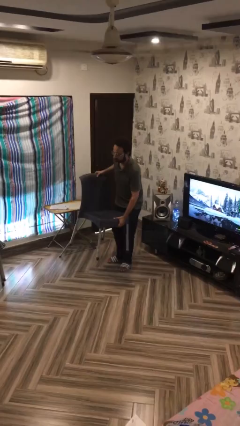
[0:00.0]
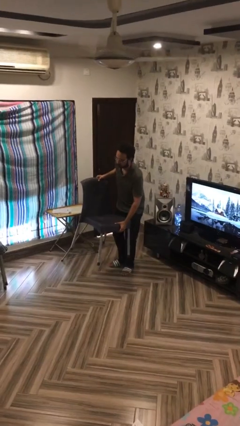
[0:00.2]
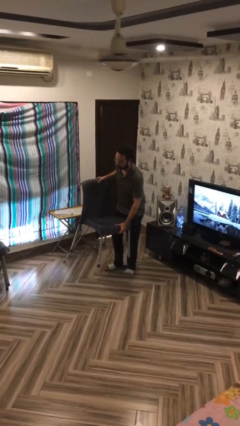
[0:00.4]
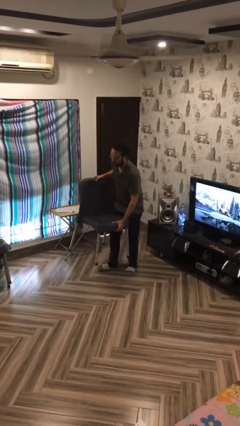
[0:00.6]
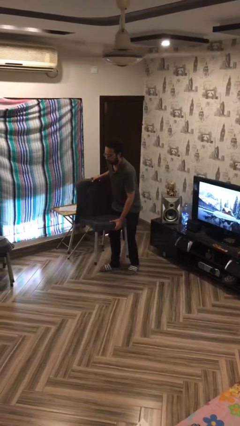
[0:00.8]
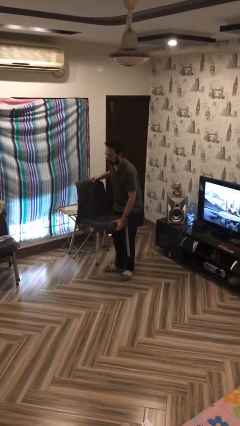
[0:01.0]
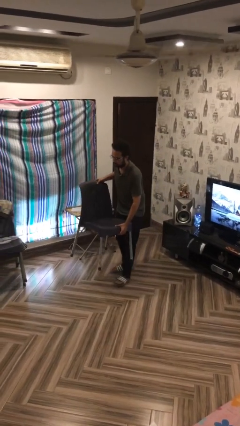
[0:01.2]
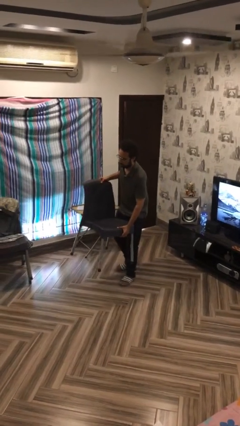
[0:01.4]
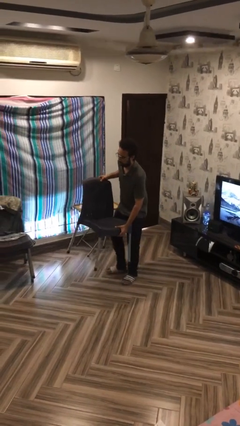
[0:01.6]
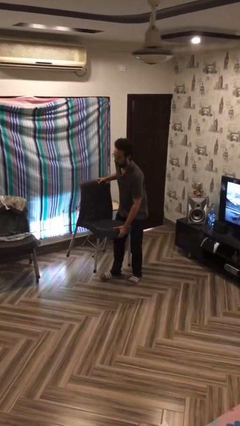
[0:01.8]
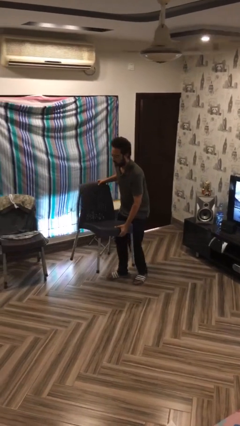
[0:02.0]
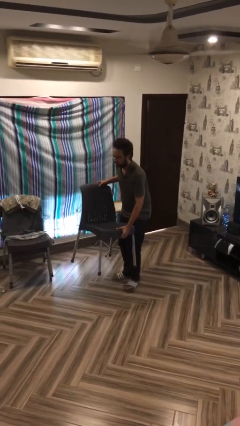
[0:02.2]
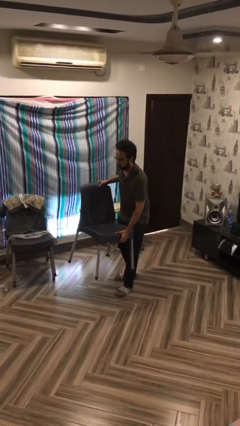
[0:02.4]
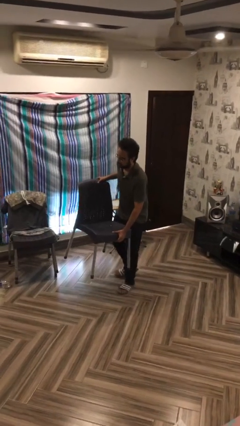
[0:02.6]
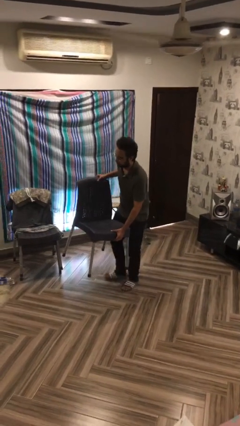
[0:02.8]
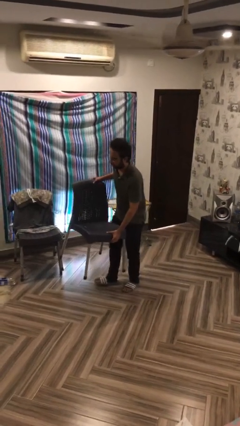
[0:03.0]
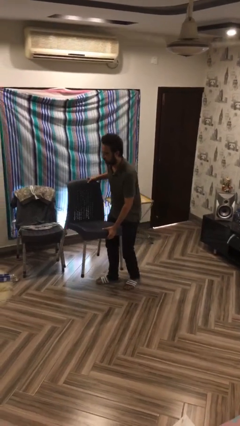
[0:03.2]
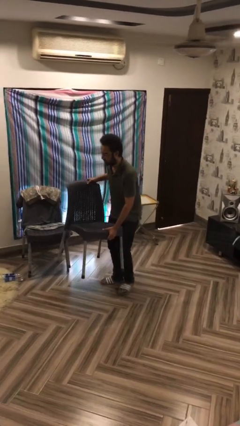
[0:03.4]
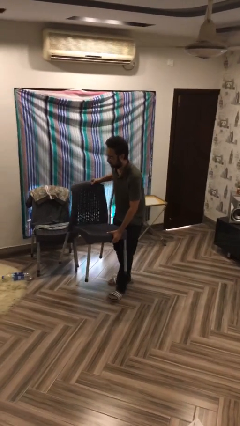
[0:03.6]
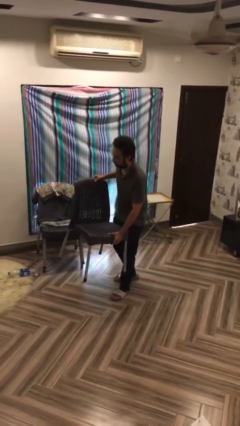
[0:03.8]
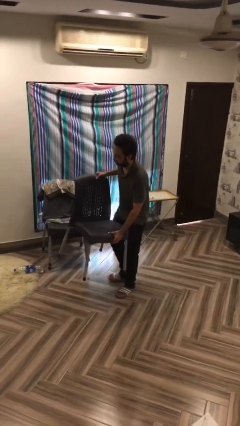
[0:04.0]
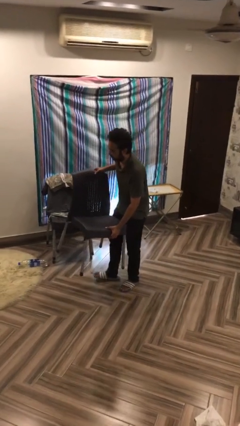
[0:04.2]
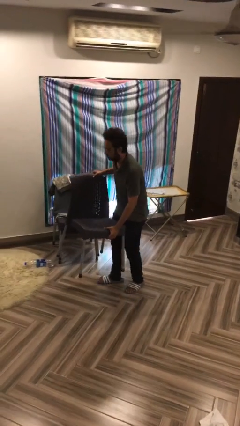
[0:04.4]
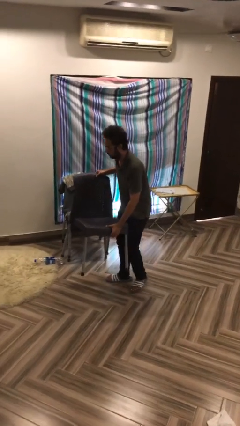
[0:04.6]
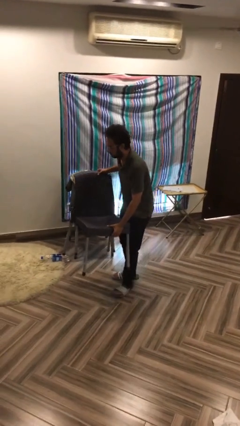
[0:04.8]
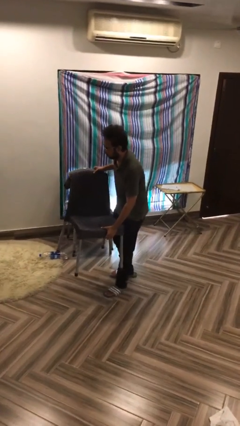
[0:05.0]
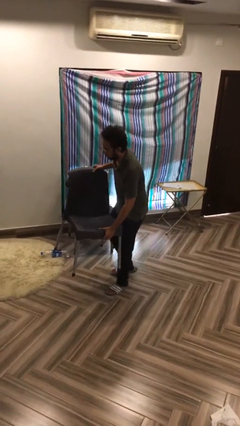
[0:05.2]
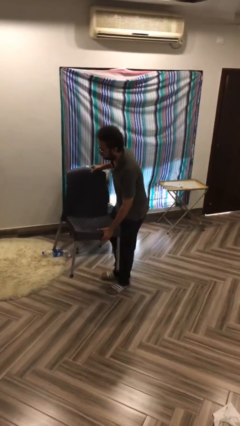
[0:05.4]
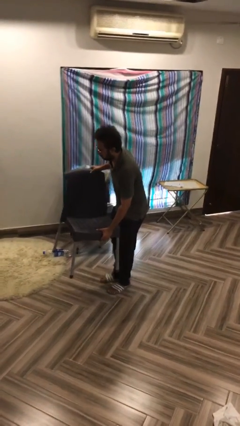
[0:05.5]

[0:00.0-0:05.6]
person carries heavy object

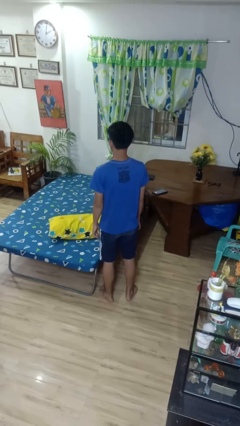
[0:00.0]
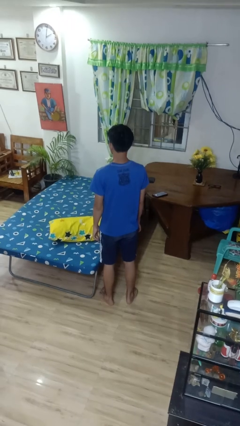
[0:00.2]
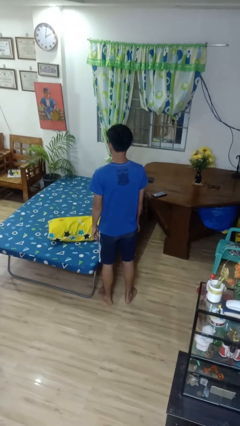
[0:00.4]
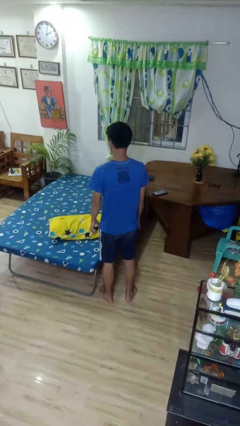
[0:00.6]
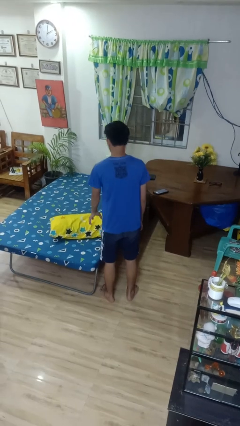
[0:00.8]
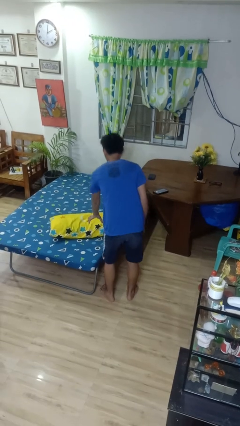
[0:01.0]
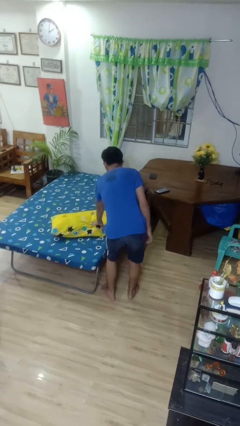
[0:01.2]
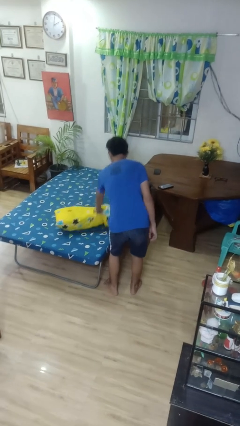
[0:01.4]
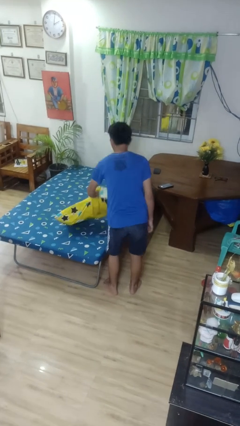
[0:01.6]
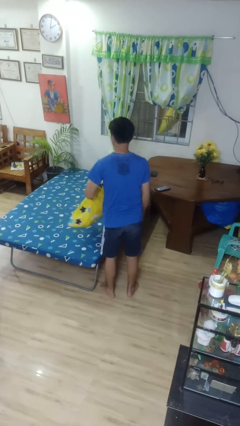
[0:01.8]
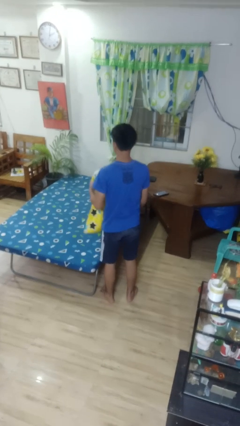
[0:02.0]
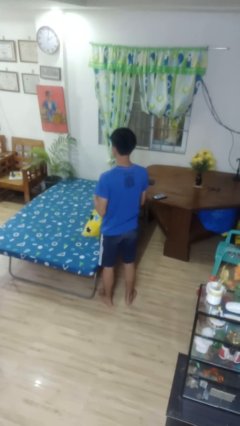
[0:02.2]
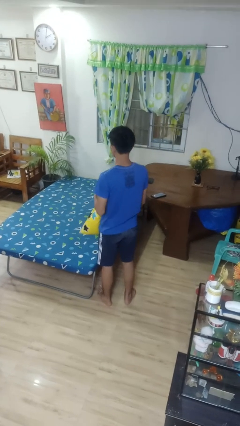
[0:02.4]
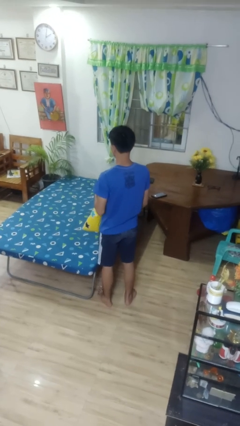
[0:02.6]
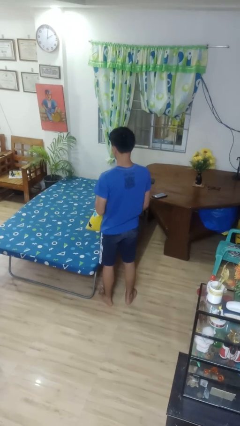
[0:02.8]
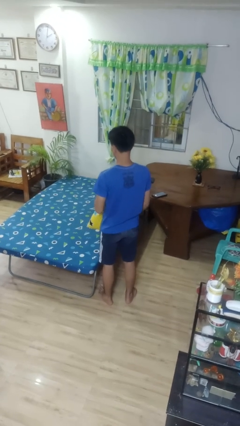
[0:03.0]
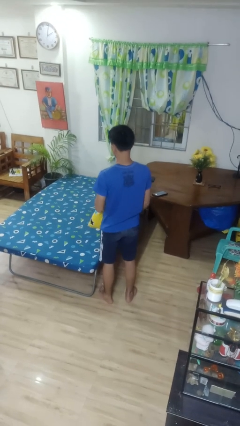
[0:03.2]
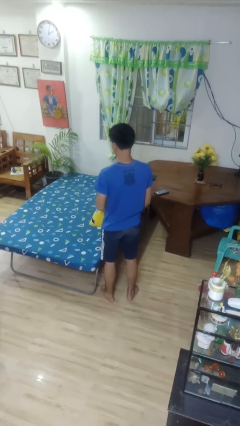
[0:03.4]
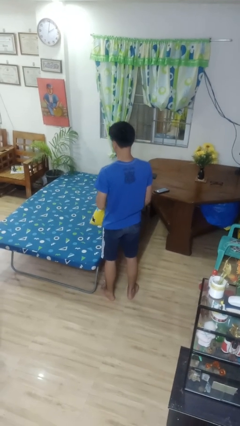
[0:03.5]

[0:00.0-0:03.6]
person picks up object from bed

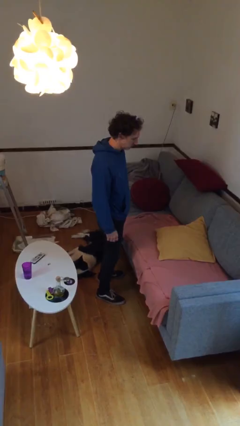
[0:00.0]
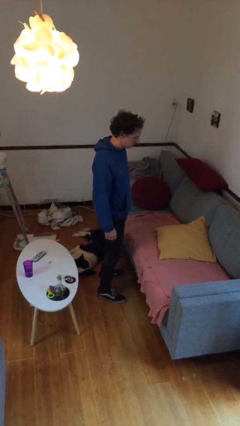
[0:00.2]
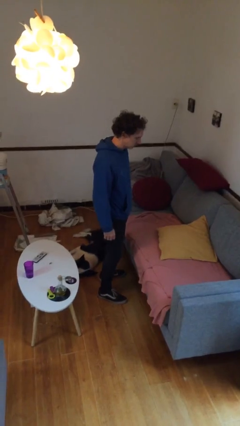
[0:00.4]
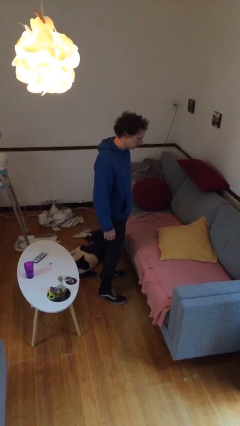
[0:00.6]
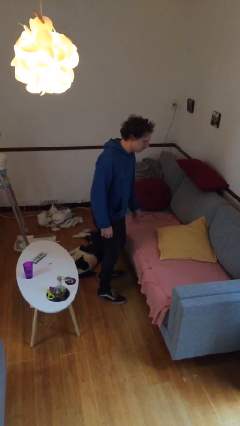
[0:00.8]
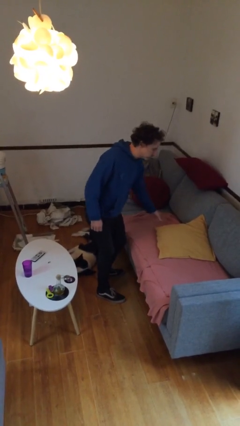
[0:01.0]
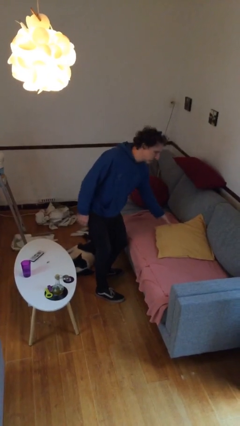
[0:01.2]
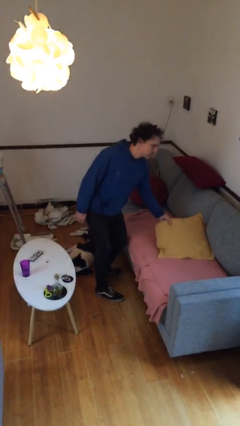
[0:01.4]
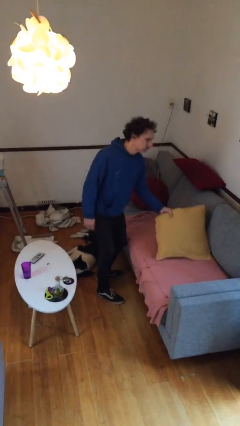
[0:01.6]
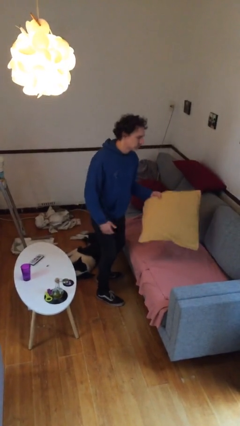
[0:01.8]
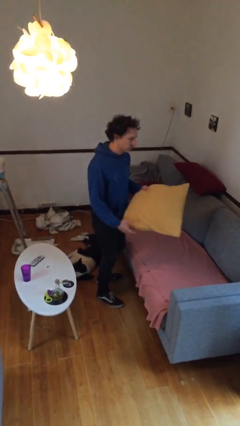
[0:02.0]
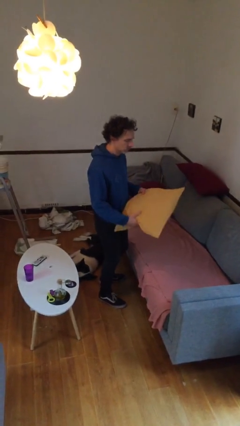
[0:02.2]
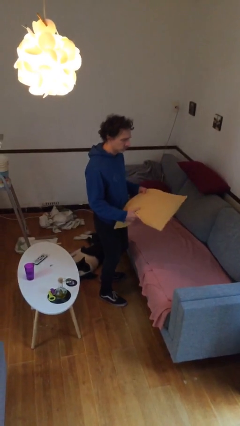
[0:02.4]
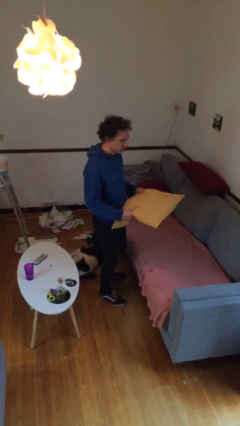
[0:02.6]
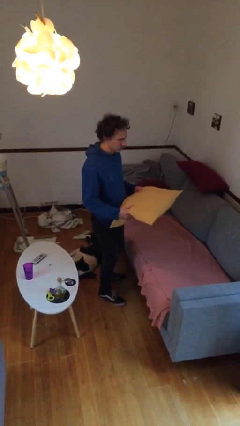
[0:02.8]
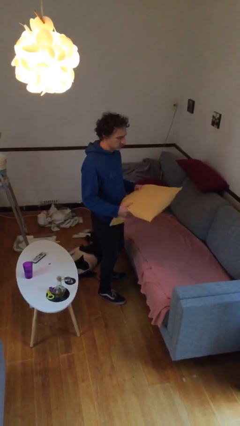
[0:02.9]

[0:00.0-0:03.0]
person picks up object from couch

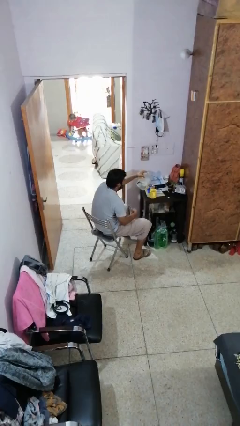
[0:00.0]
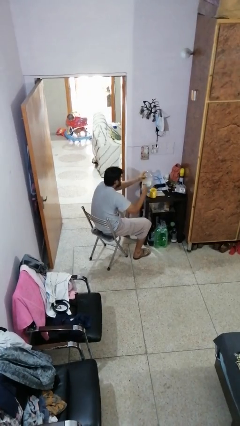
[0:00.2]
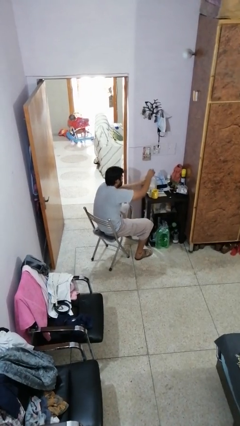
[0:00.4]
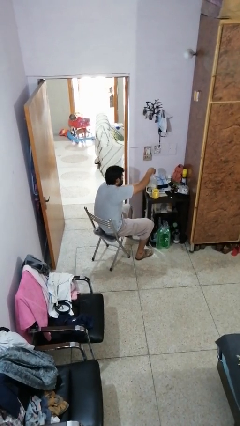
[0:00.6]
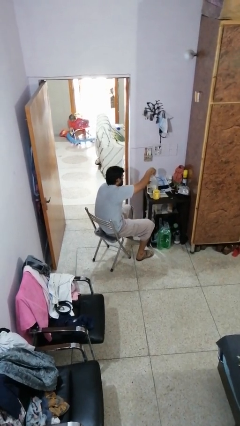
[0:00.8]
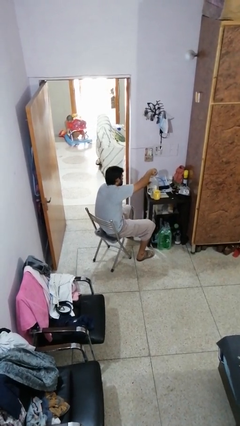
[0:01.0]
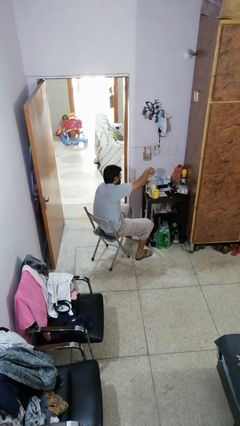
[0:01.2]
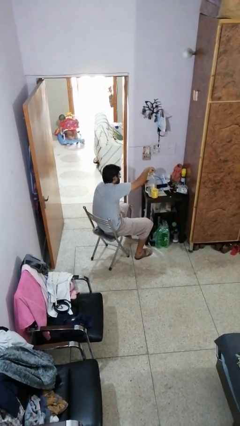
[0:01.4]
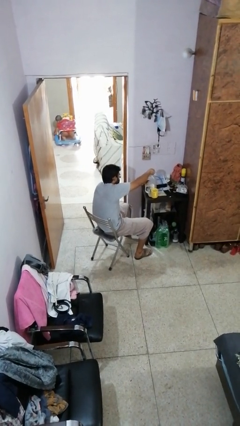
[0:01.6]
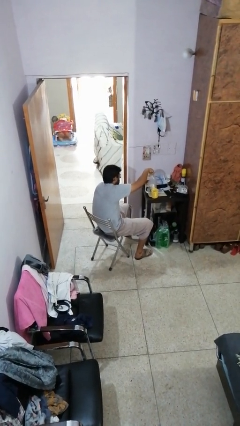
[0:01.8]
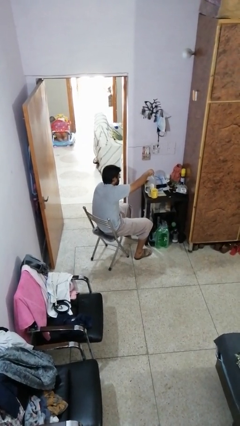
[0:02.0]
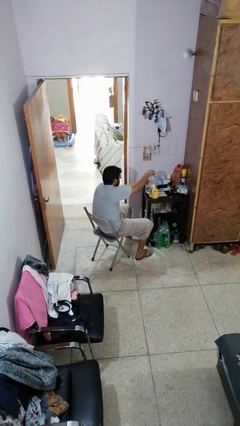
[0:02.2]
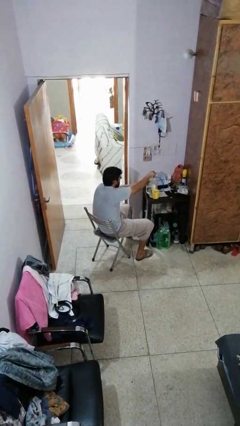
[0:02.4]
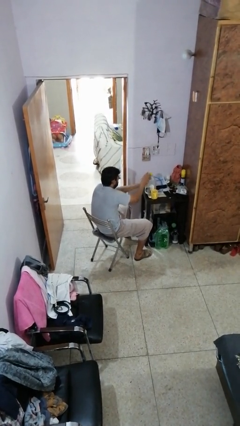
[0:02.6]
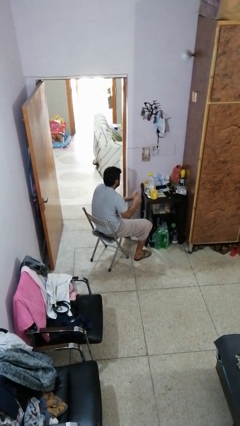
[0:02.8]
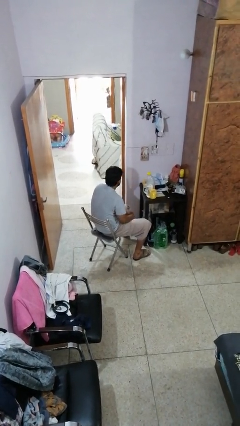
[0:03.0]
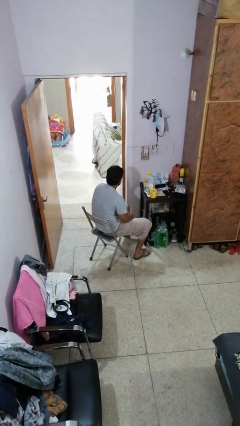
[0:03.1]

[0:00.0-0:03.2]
person screws lid to bottle

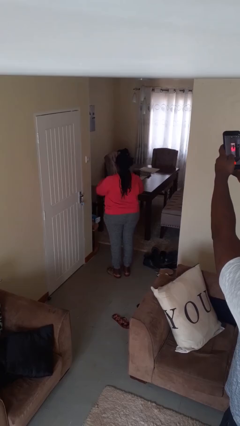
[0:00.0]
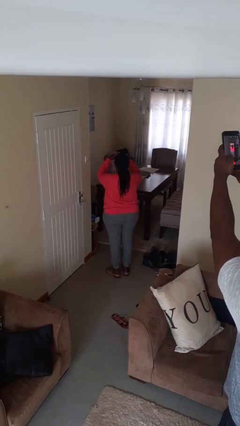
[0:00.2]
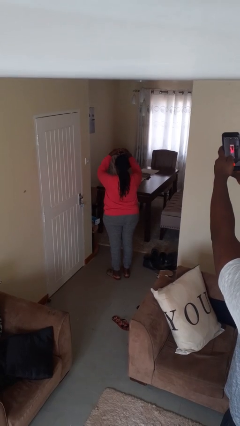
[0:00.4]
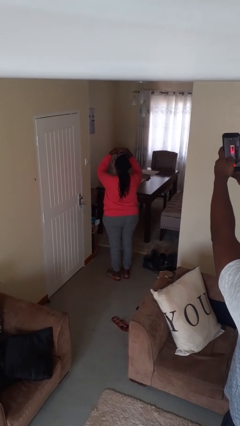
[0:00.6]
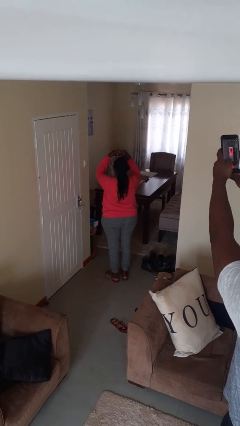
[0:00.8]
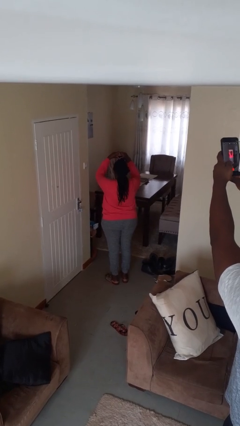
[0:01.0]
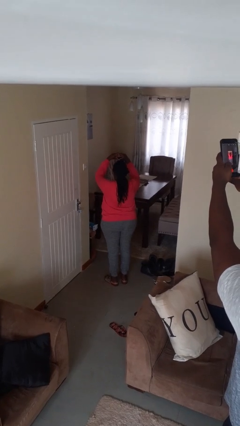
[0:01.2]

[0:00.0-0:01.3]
person gestures heart

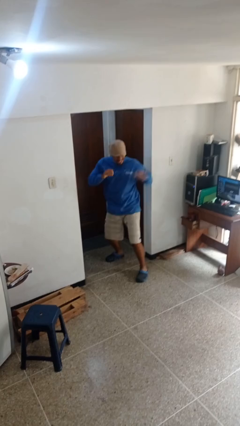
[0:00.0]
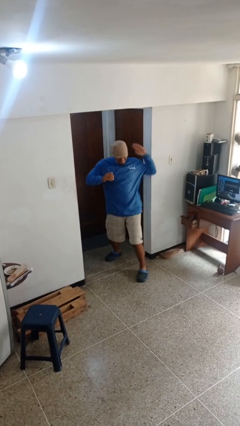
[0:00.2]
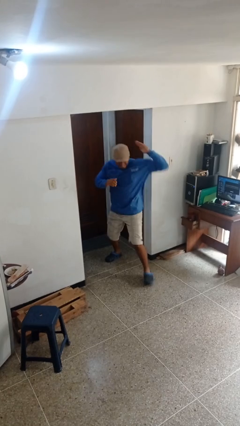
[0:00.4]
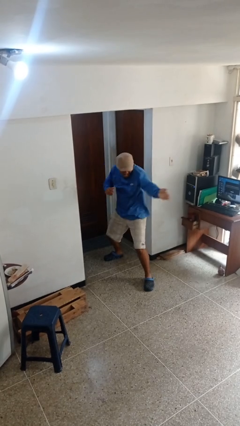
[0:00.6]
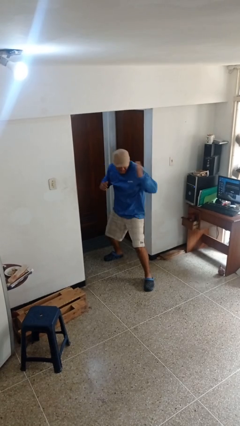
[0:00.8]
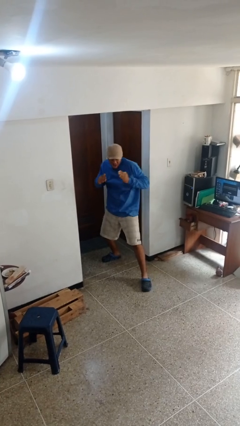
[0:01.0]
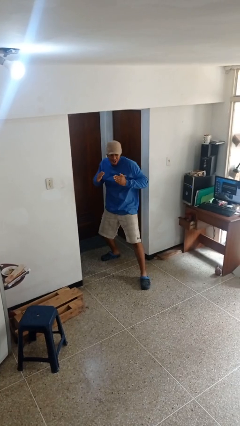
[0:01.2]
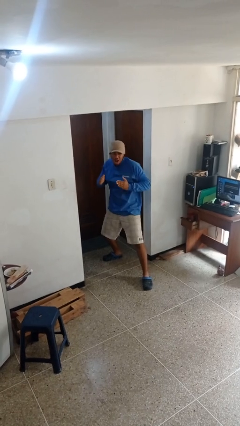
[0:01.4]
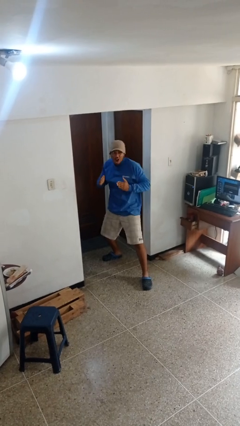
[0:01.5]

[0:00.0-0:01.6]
person karate chop
